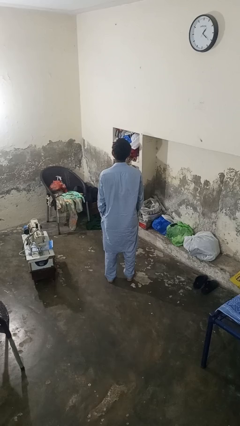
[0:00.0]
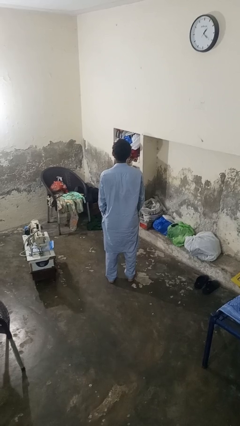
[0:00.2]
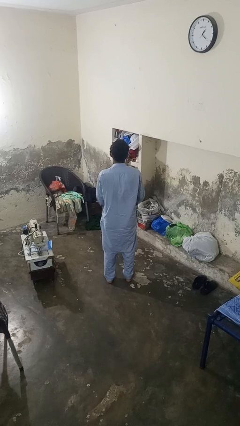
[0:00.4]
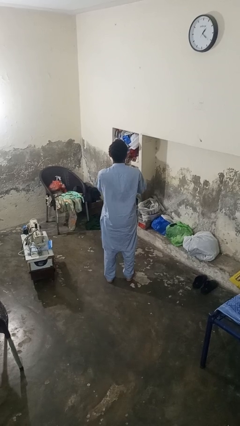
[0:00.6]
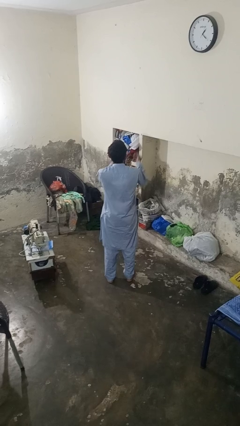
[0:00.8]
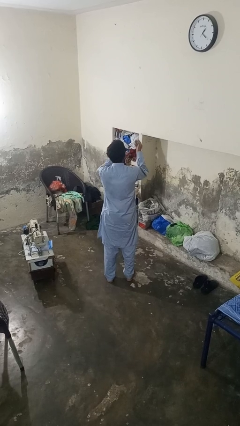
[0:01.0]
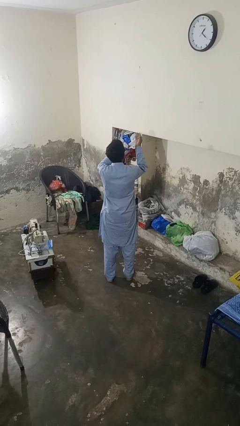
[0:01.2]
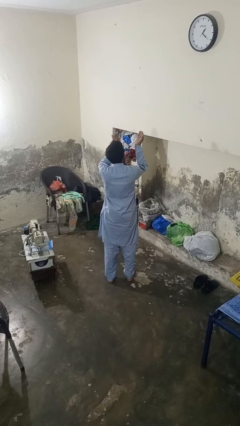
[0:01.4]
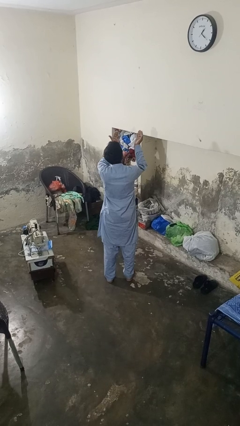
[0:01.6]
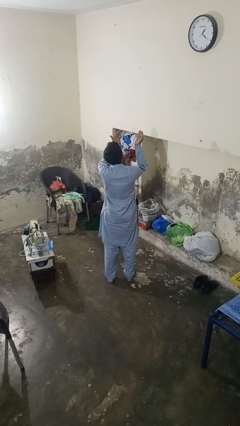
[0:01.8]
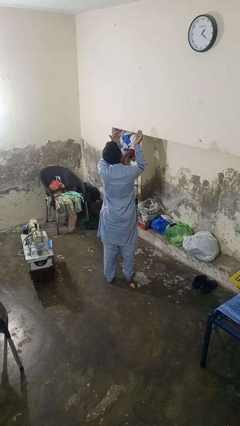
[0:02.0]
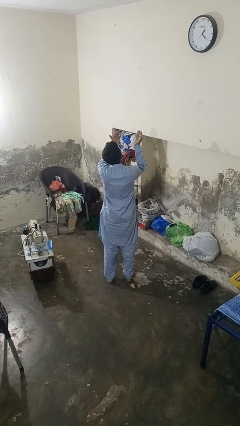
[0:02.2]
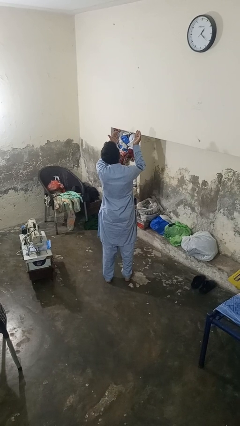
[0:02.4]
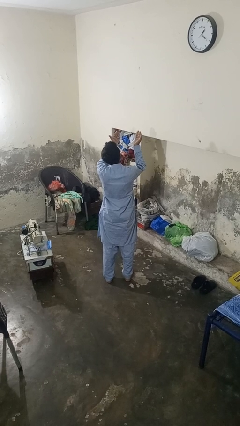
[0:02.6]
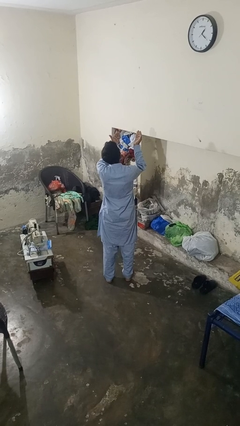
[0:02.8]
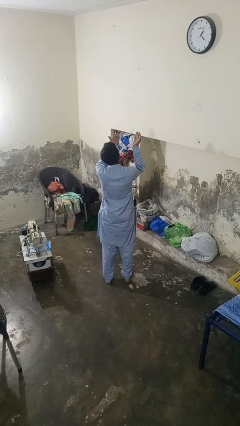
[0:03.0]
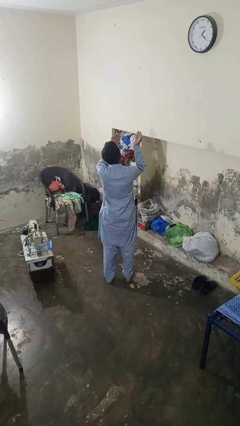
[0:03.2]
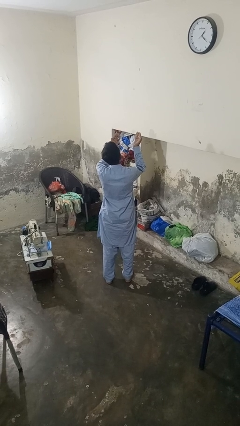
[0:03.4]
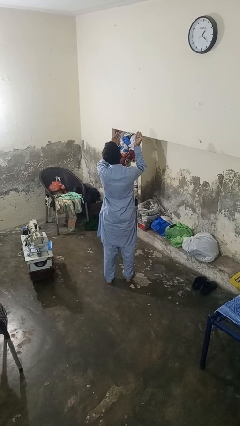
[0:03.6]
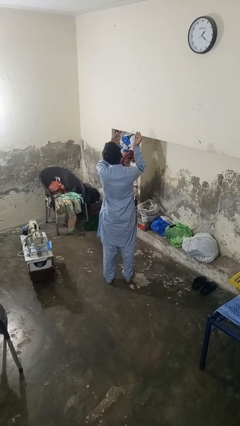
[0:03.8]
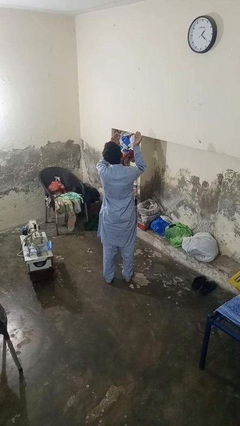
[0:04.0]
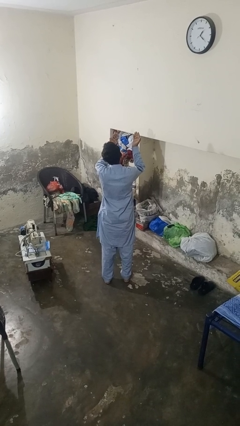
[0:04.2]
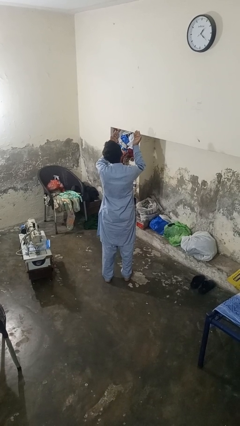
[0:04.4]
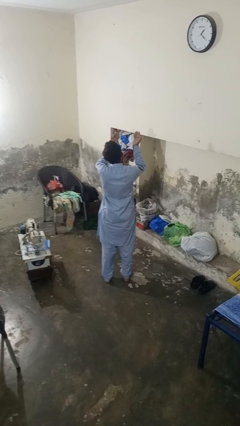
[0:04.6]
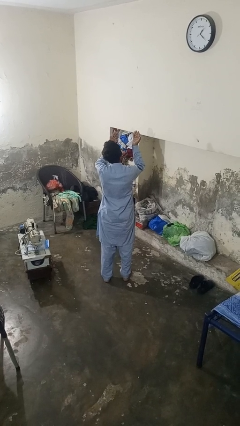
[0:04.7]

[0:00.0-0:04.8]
person prays

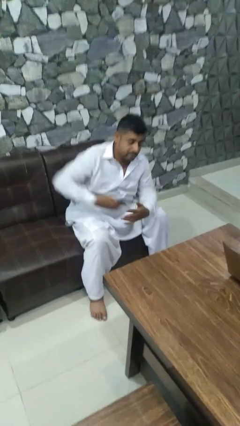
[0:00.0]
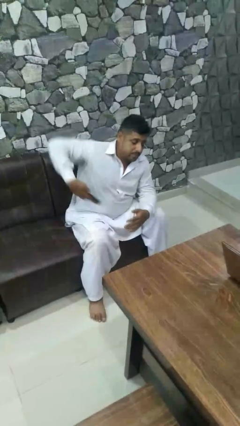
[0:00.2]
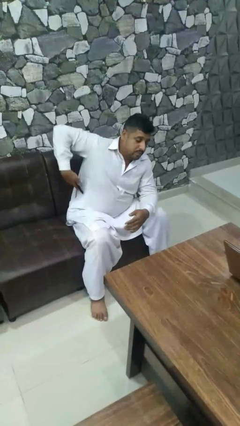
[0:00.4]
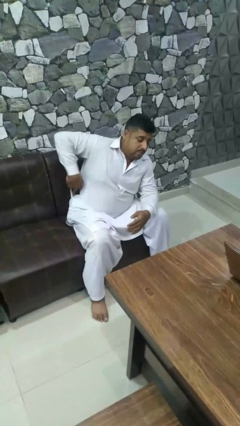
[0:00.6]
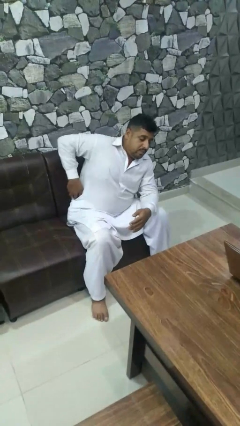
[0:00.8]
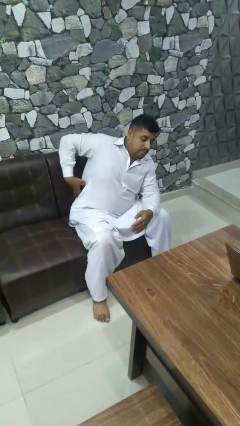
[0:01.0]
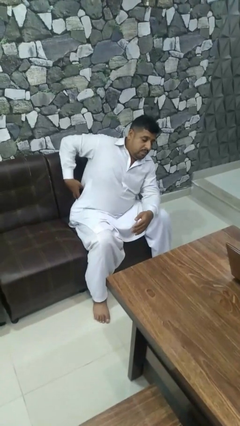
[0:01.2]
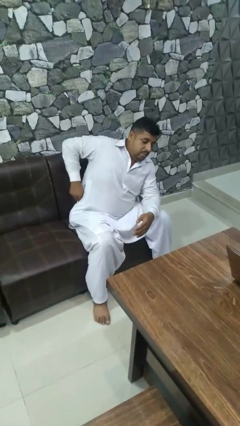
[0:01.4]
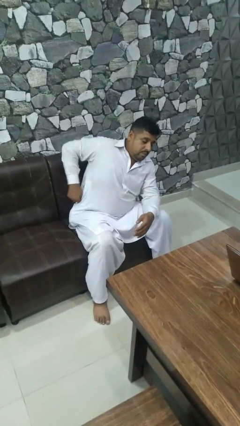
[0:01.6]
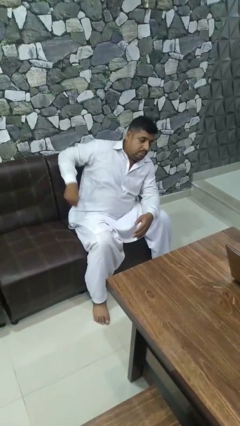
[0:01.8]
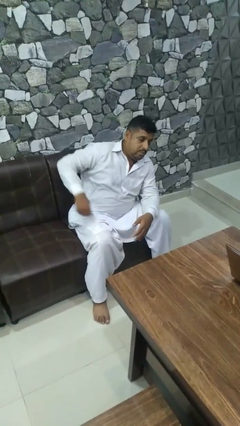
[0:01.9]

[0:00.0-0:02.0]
person puts phone into pocket

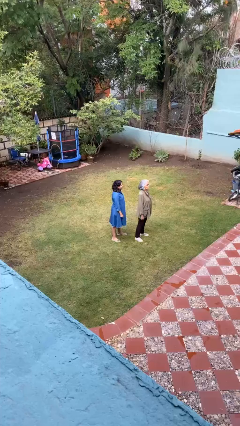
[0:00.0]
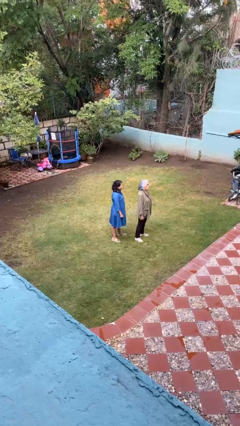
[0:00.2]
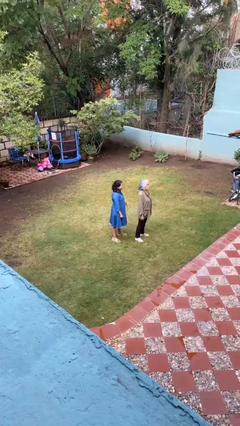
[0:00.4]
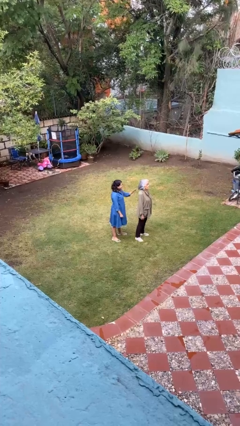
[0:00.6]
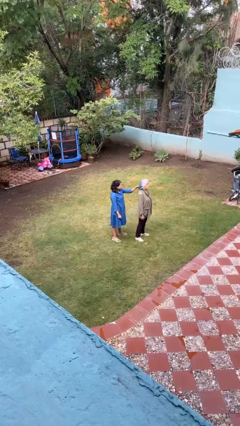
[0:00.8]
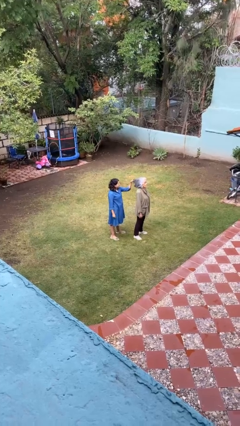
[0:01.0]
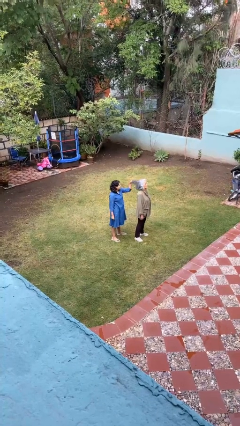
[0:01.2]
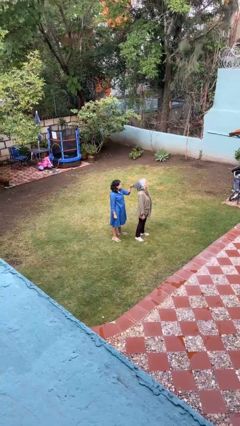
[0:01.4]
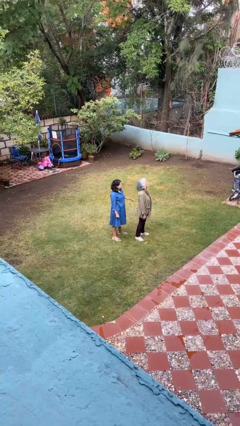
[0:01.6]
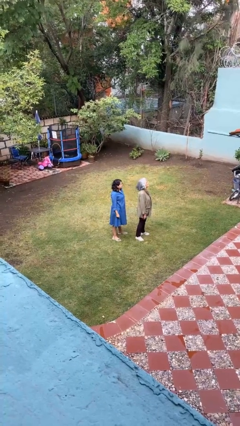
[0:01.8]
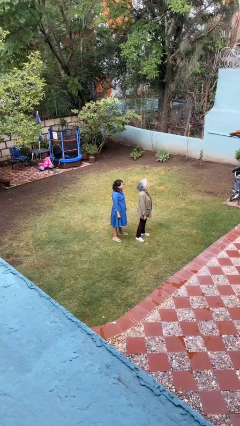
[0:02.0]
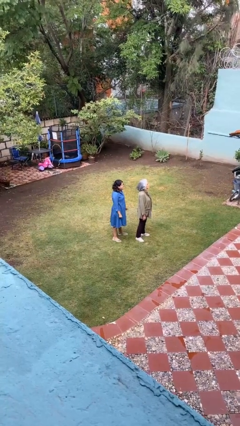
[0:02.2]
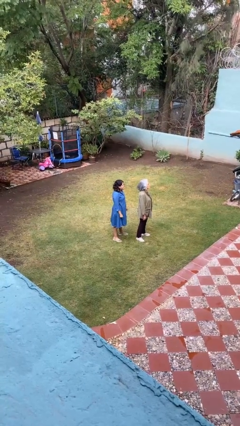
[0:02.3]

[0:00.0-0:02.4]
person grabs person by hair

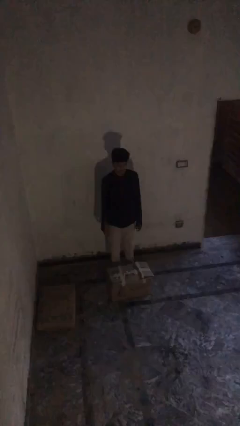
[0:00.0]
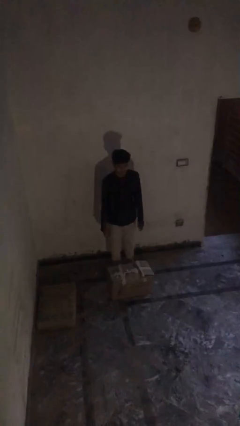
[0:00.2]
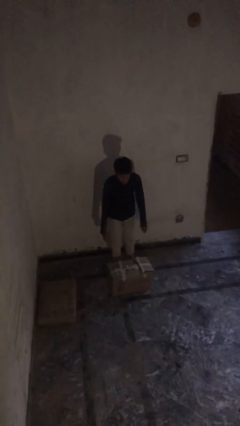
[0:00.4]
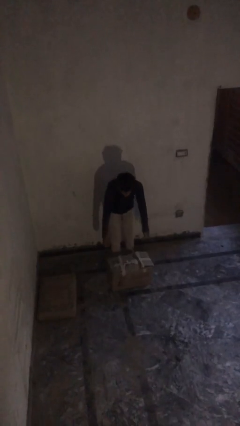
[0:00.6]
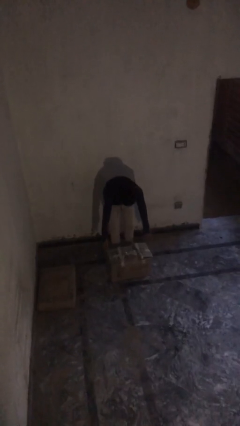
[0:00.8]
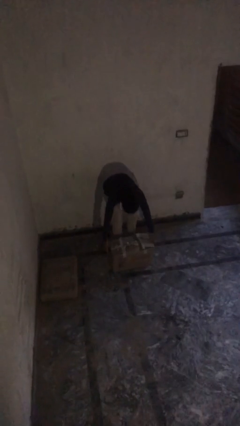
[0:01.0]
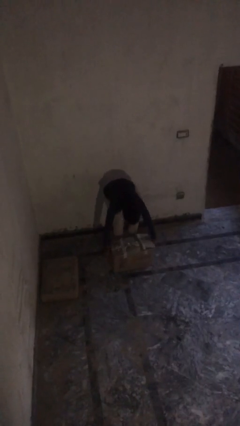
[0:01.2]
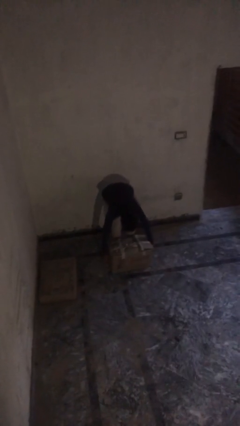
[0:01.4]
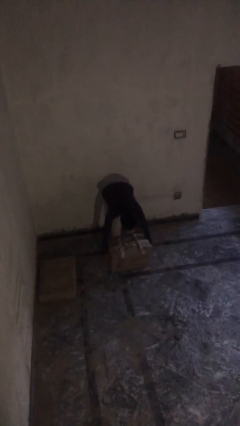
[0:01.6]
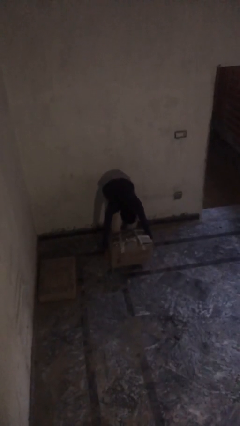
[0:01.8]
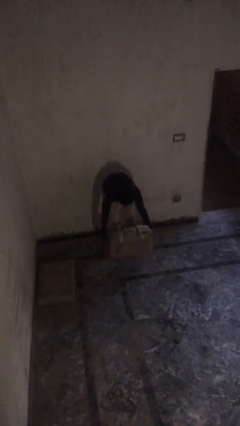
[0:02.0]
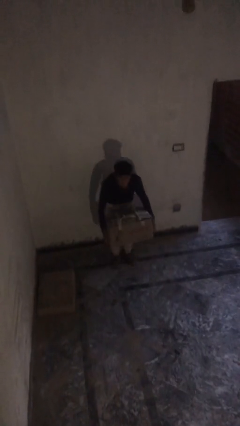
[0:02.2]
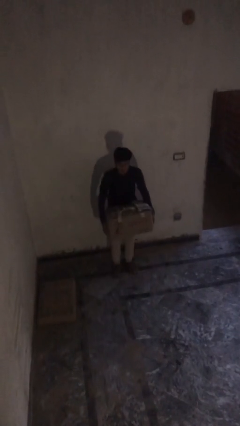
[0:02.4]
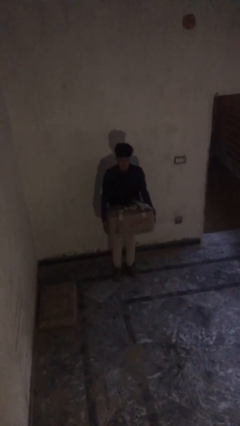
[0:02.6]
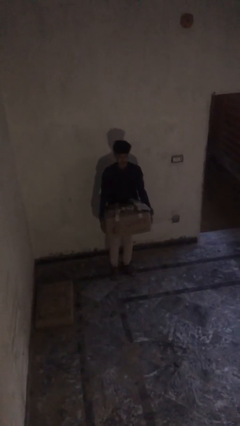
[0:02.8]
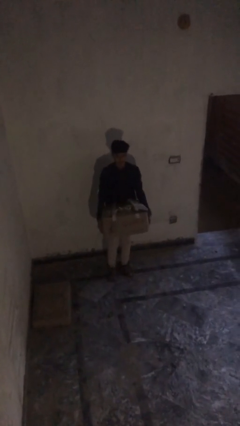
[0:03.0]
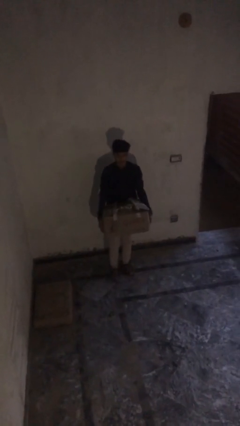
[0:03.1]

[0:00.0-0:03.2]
person picks up object from floor

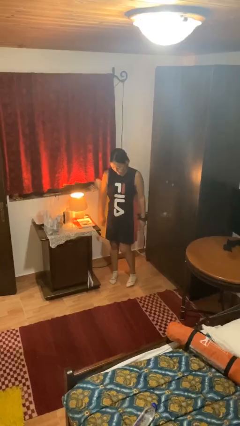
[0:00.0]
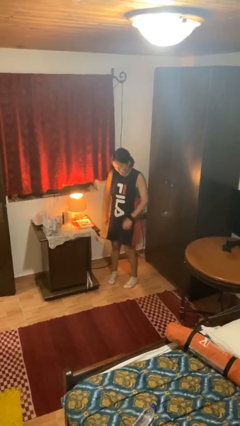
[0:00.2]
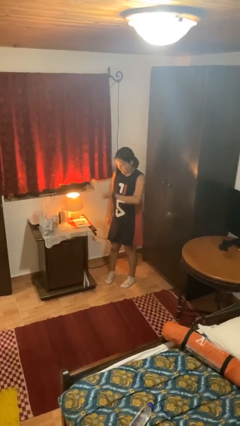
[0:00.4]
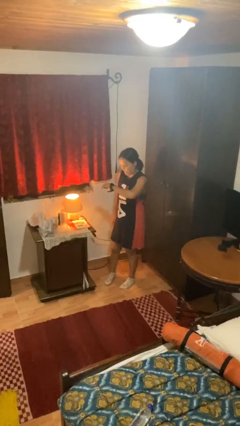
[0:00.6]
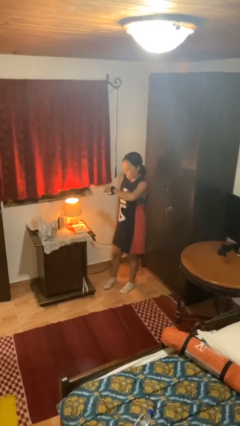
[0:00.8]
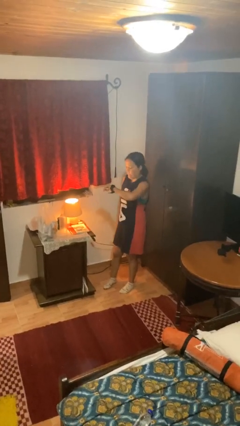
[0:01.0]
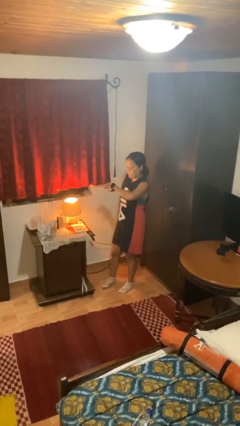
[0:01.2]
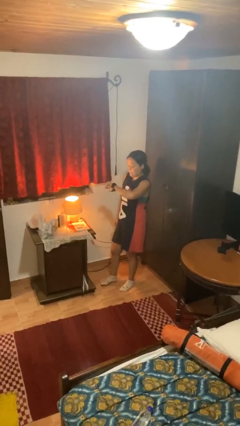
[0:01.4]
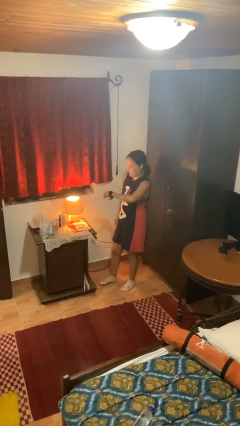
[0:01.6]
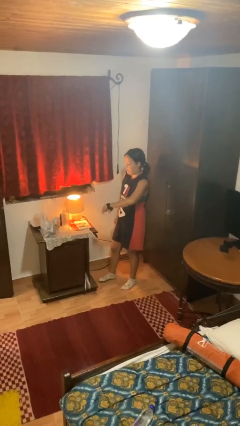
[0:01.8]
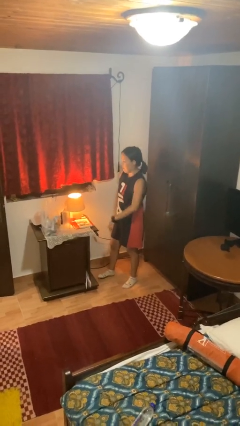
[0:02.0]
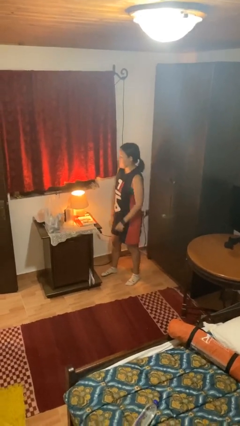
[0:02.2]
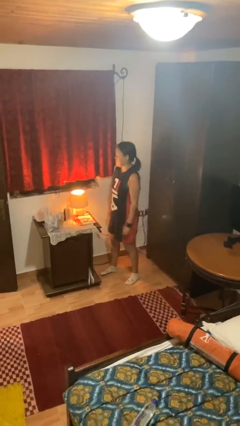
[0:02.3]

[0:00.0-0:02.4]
person looks at wristwatch

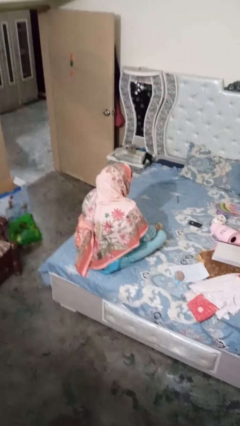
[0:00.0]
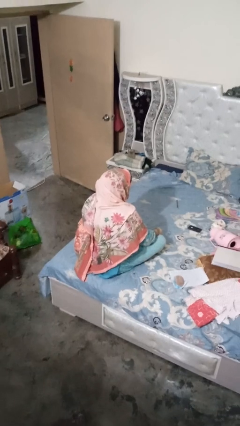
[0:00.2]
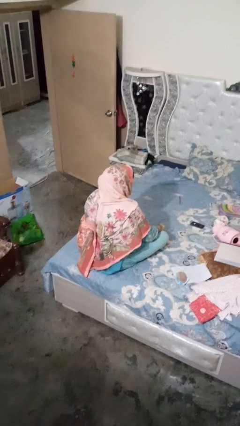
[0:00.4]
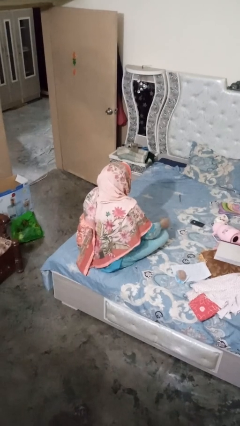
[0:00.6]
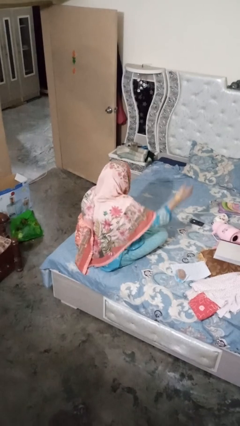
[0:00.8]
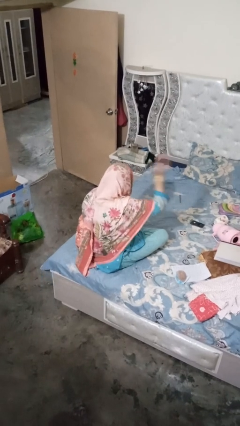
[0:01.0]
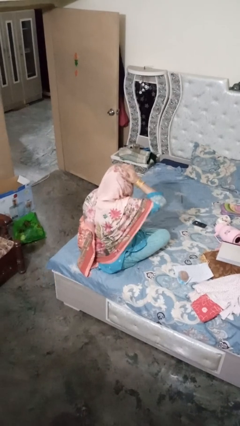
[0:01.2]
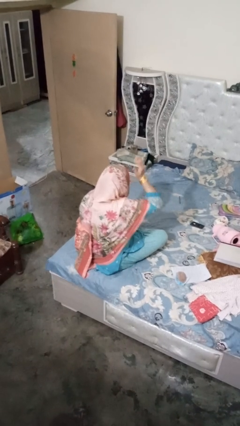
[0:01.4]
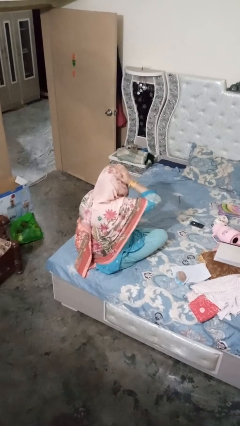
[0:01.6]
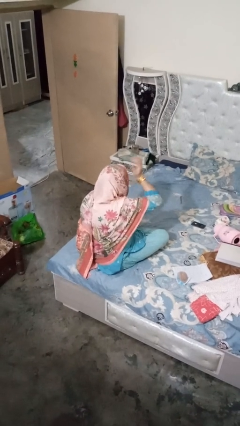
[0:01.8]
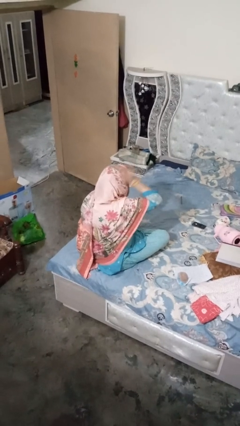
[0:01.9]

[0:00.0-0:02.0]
person pats head

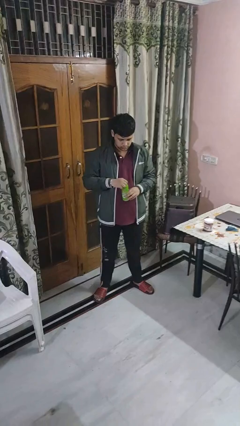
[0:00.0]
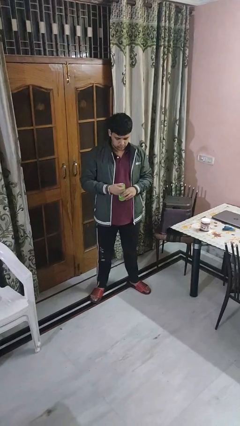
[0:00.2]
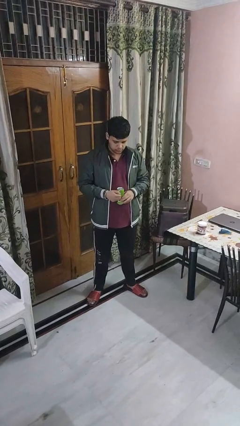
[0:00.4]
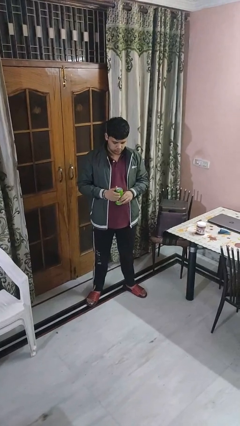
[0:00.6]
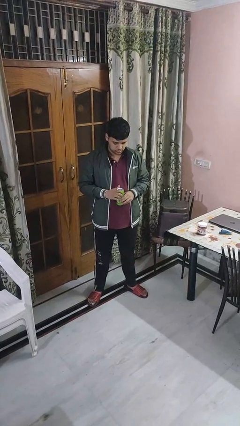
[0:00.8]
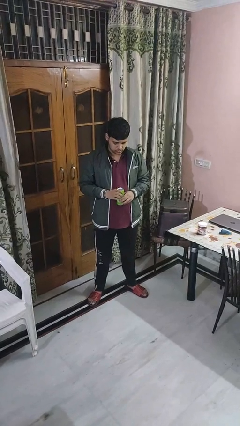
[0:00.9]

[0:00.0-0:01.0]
person opens beverage can
